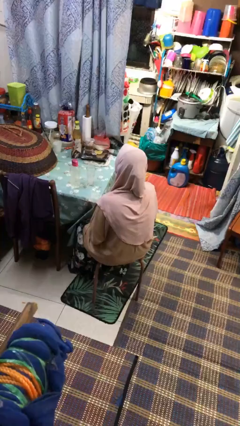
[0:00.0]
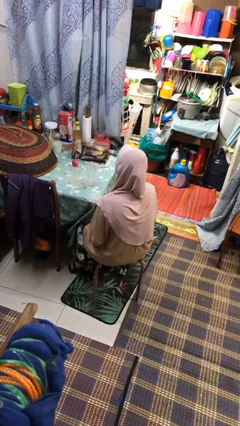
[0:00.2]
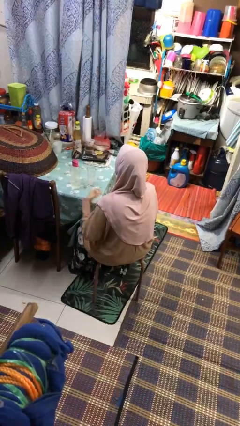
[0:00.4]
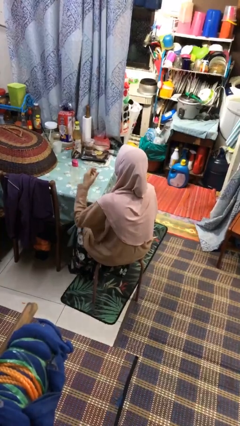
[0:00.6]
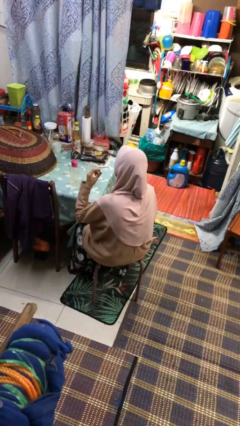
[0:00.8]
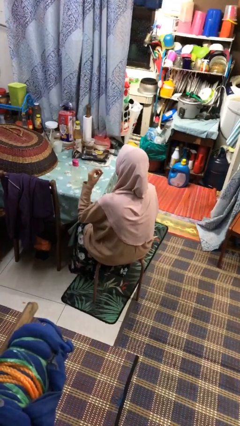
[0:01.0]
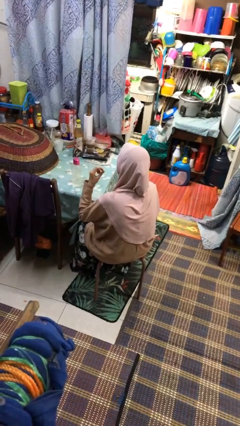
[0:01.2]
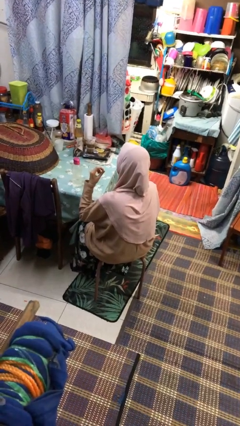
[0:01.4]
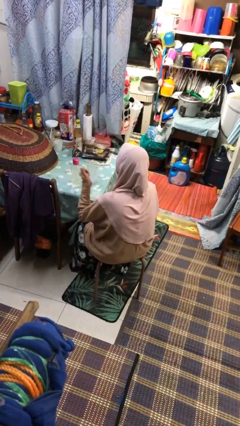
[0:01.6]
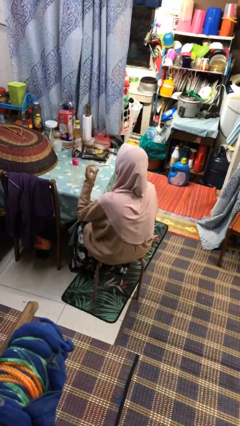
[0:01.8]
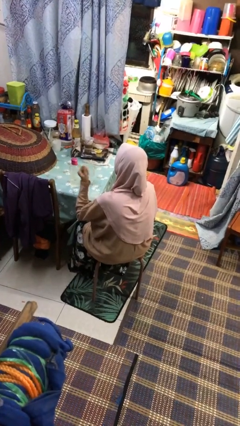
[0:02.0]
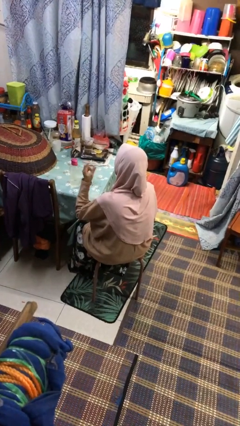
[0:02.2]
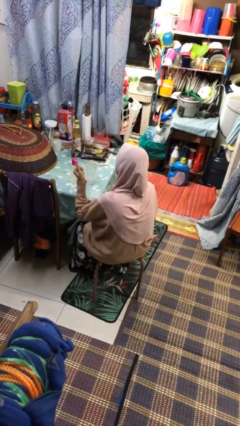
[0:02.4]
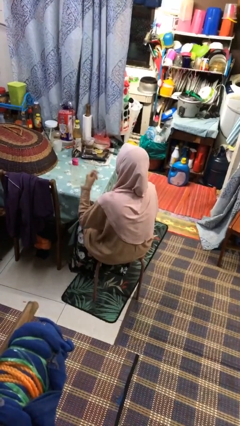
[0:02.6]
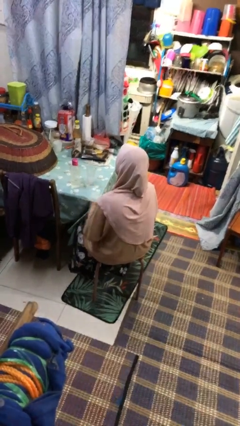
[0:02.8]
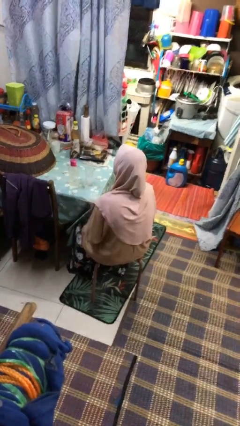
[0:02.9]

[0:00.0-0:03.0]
person snaps fingers

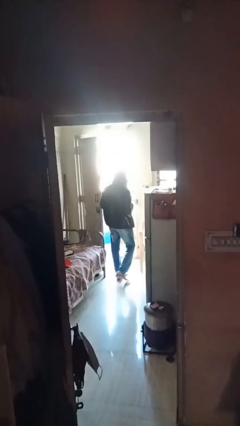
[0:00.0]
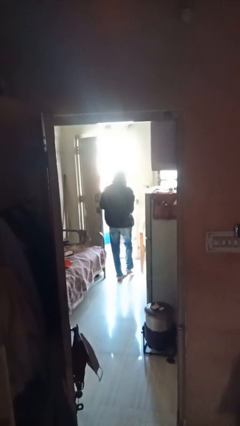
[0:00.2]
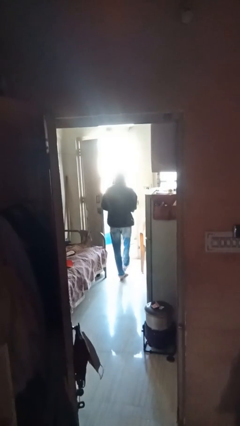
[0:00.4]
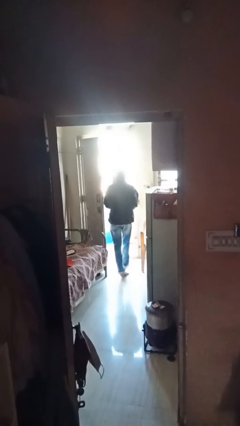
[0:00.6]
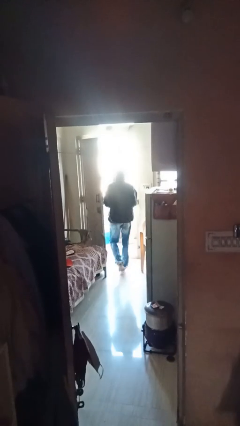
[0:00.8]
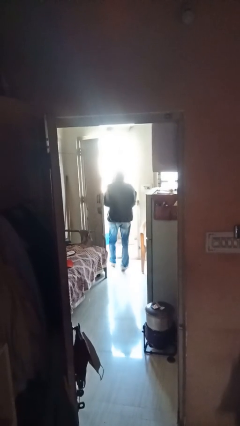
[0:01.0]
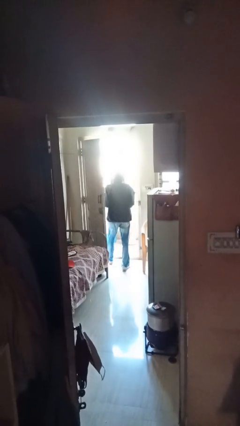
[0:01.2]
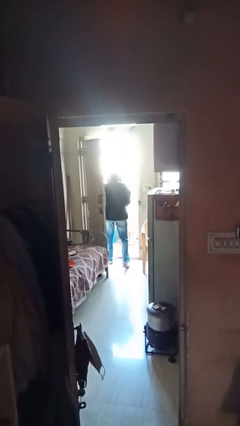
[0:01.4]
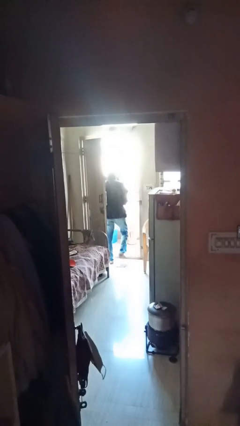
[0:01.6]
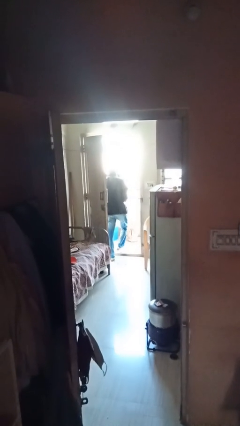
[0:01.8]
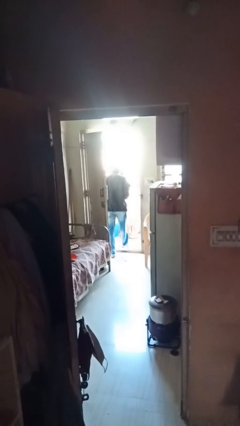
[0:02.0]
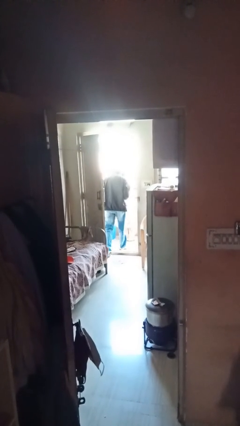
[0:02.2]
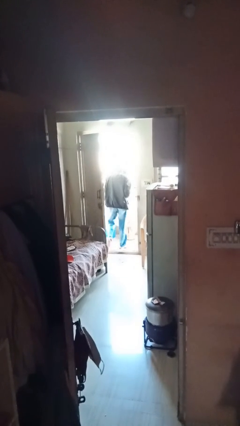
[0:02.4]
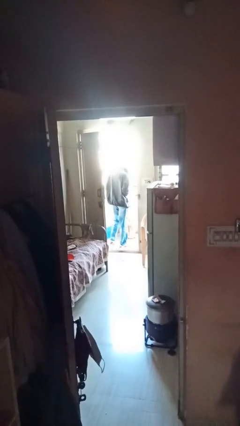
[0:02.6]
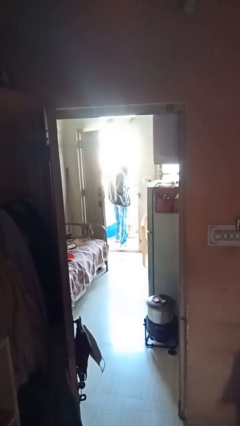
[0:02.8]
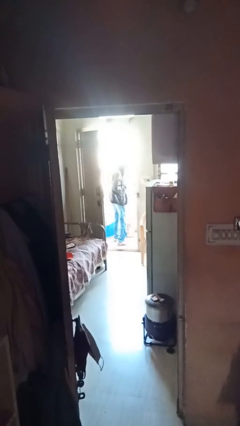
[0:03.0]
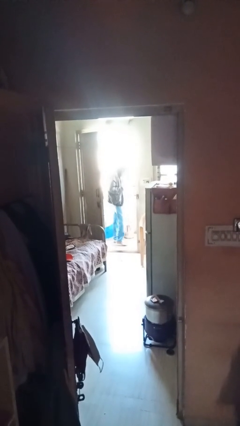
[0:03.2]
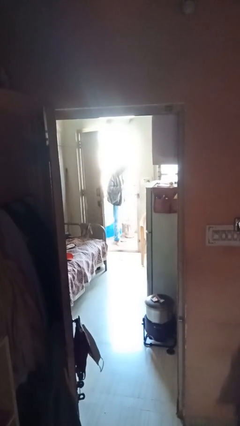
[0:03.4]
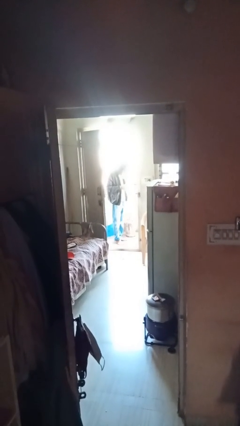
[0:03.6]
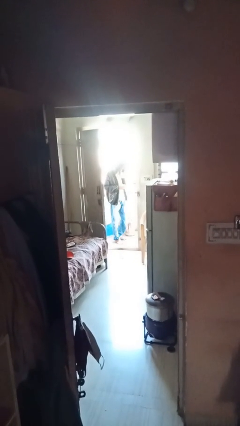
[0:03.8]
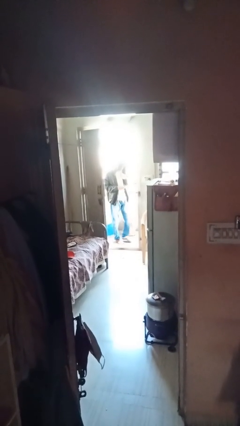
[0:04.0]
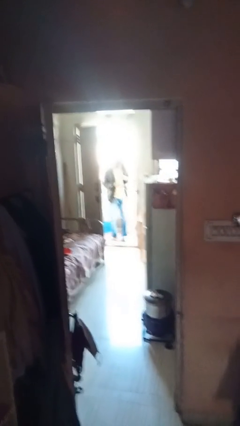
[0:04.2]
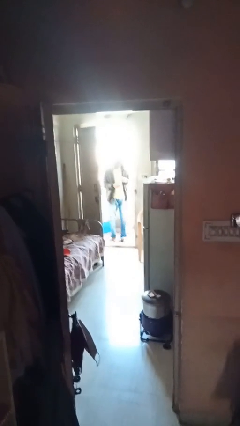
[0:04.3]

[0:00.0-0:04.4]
person exits scene through structure

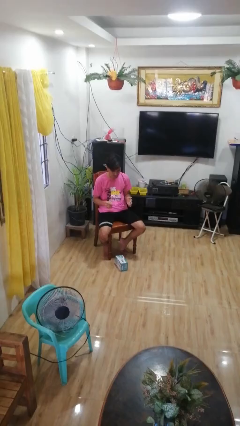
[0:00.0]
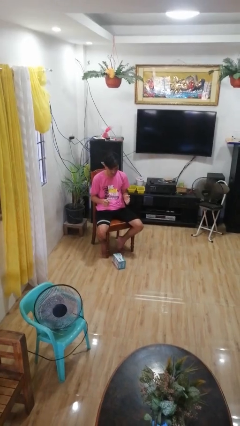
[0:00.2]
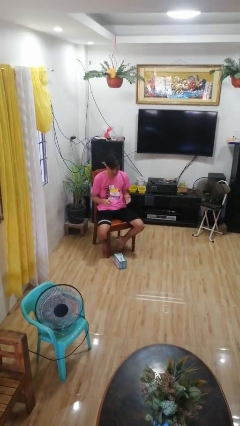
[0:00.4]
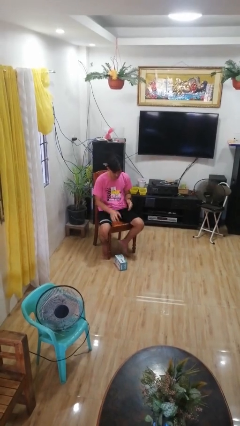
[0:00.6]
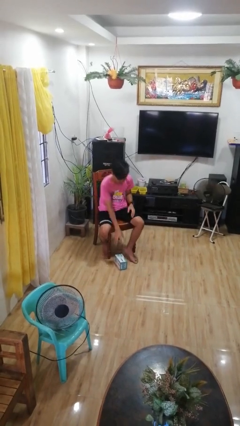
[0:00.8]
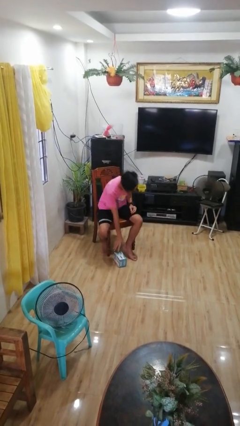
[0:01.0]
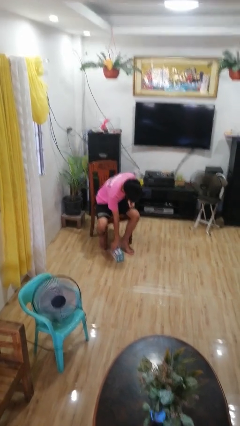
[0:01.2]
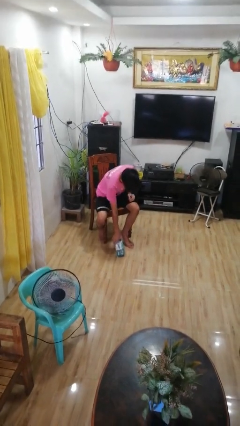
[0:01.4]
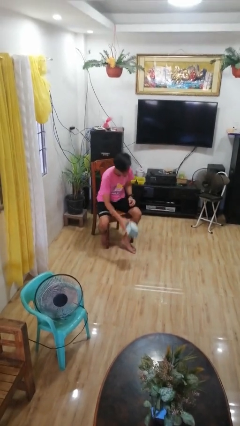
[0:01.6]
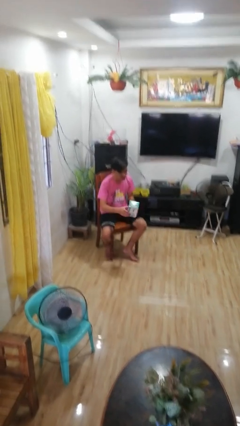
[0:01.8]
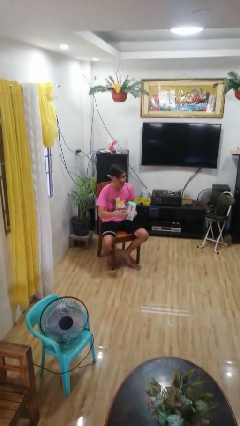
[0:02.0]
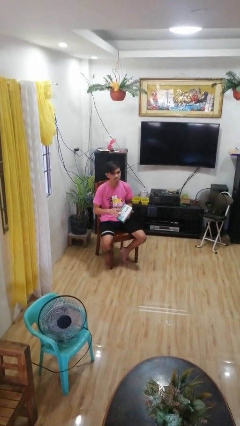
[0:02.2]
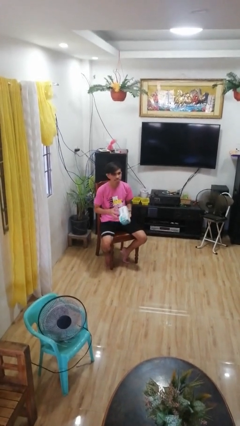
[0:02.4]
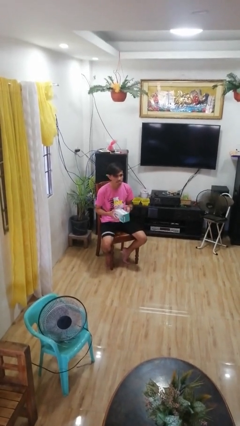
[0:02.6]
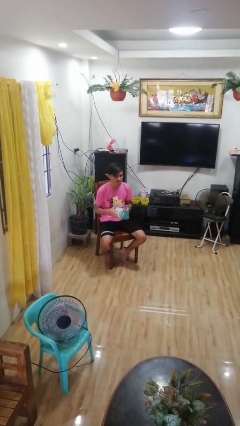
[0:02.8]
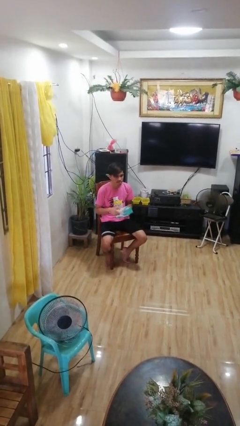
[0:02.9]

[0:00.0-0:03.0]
person picks up object from floor

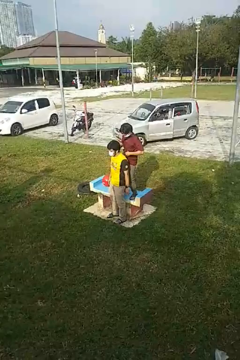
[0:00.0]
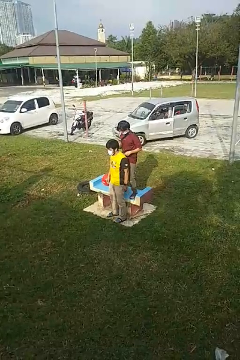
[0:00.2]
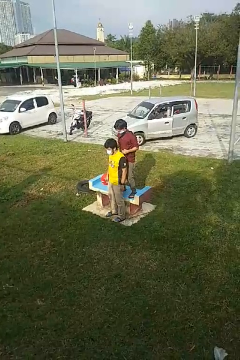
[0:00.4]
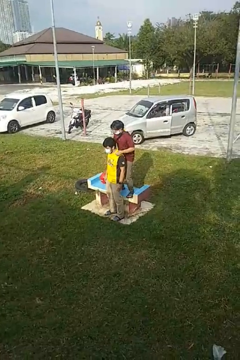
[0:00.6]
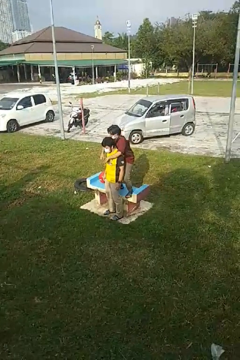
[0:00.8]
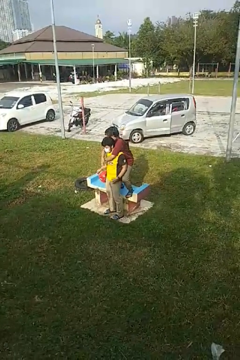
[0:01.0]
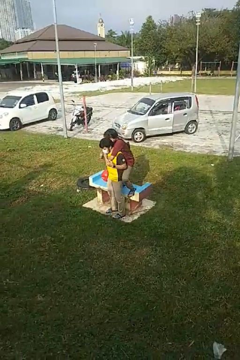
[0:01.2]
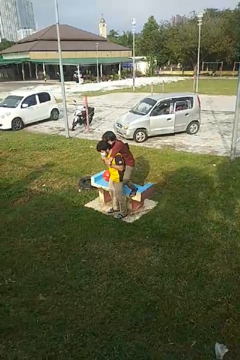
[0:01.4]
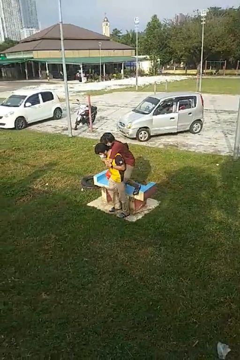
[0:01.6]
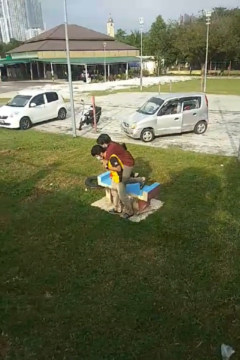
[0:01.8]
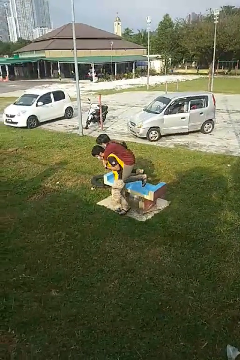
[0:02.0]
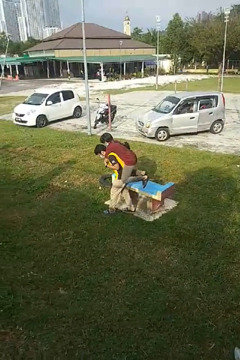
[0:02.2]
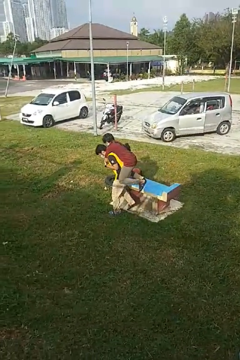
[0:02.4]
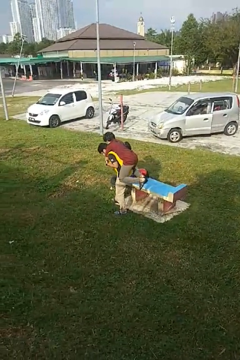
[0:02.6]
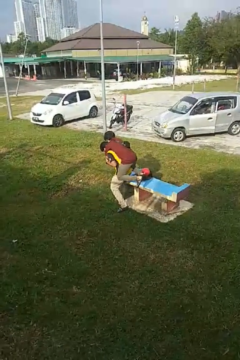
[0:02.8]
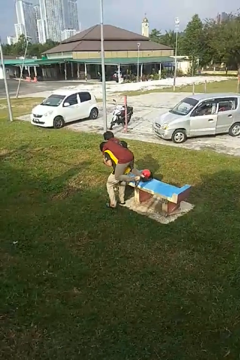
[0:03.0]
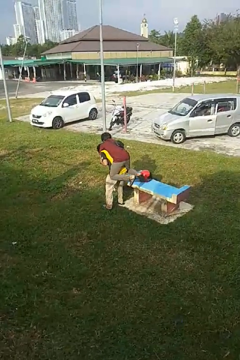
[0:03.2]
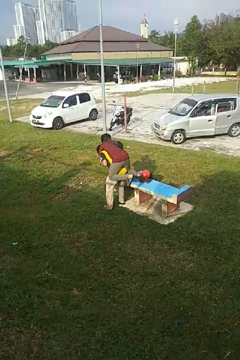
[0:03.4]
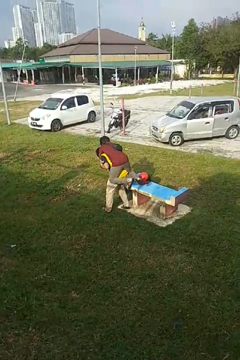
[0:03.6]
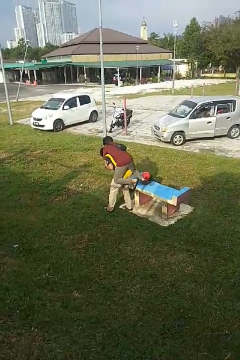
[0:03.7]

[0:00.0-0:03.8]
person carries person over shoulder

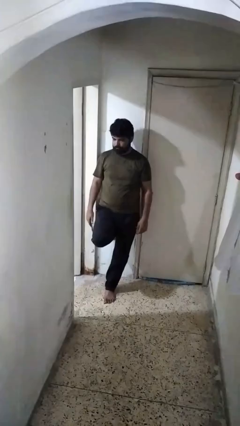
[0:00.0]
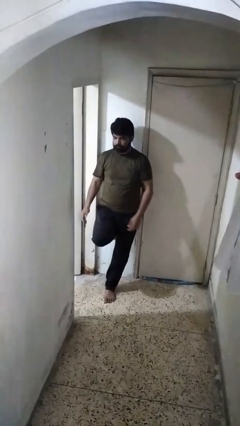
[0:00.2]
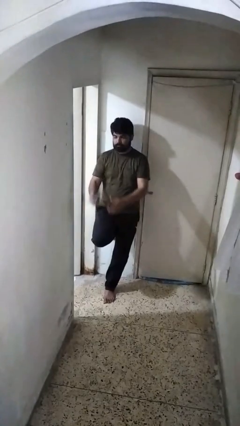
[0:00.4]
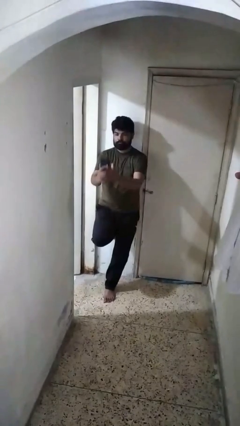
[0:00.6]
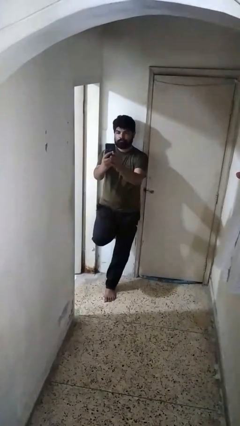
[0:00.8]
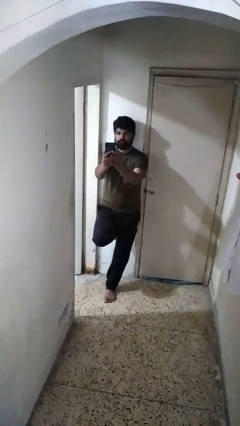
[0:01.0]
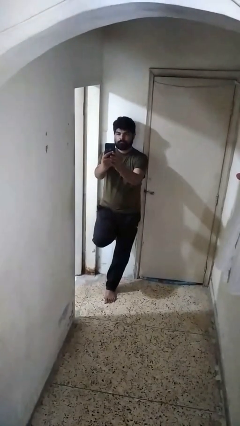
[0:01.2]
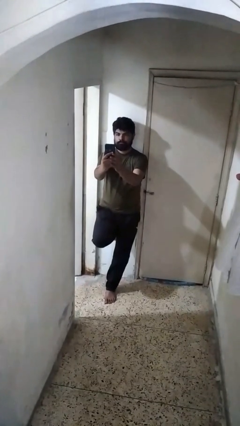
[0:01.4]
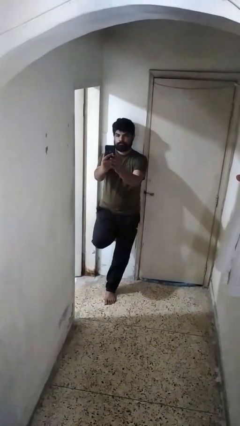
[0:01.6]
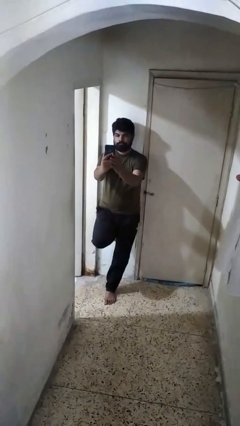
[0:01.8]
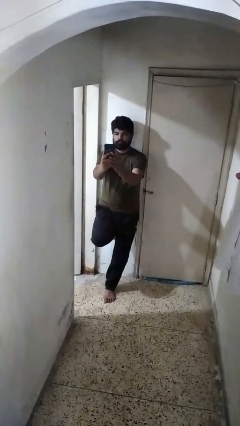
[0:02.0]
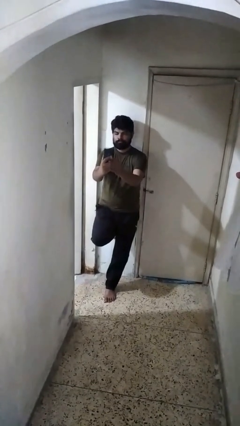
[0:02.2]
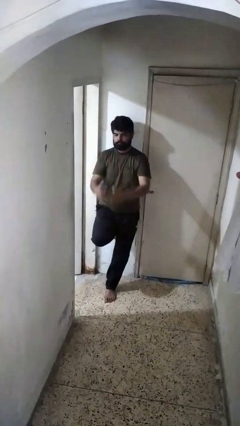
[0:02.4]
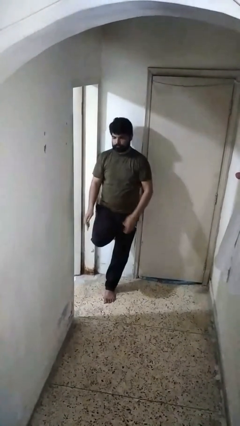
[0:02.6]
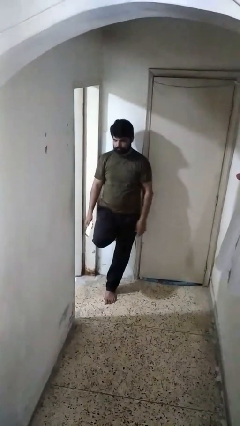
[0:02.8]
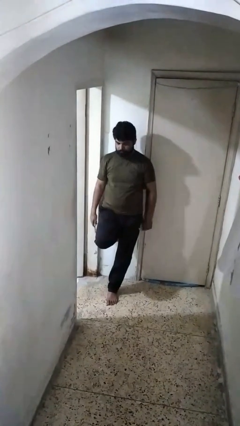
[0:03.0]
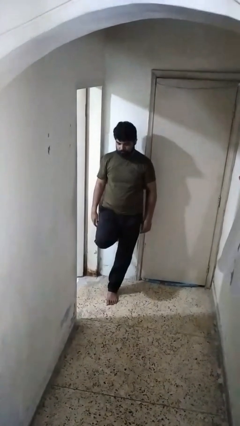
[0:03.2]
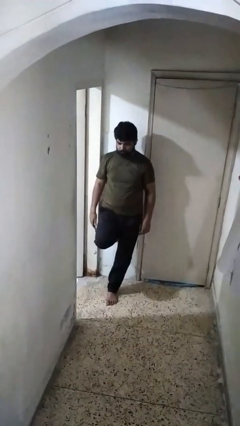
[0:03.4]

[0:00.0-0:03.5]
person takes selfie

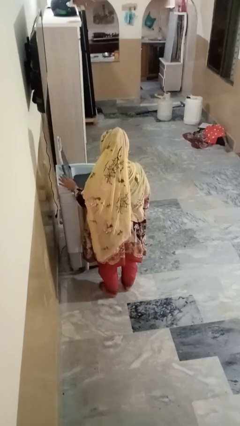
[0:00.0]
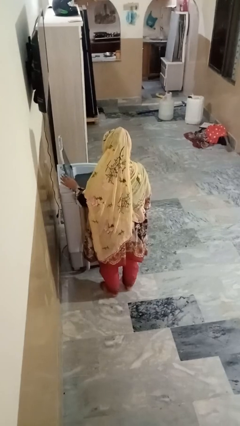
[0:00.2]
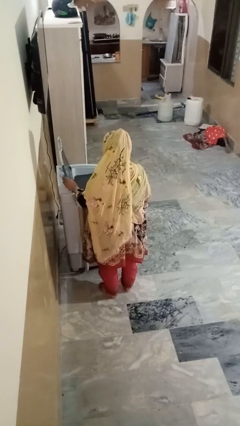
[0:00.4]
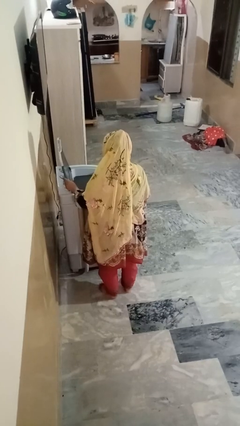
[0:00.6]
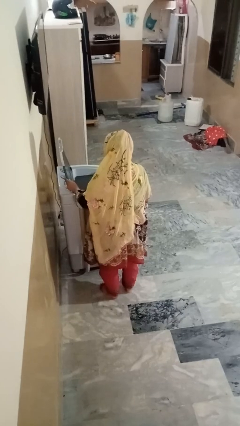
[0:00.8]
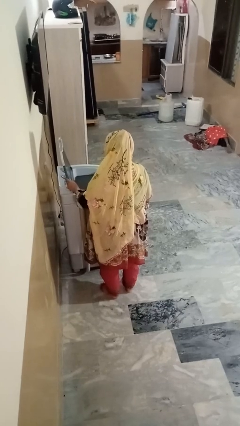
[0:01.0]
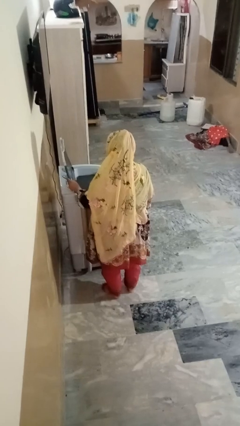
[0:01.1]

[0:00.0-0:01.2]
person closes clothes washer
